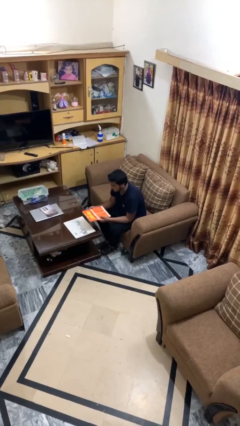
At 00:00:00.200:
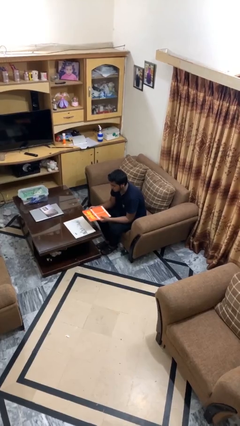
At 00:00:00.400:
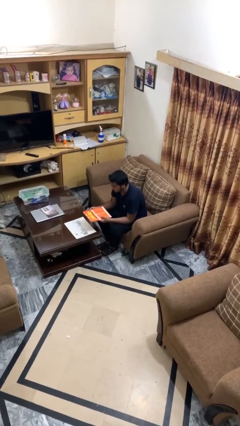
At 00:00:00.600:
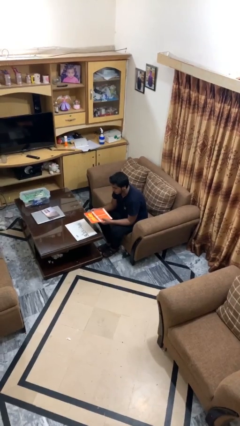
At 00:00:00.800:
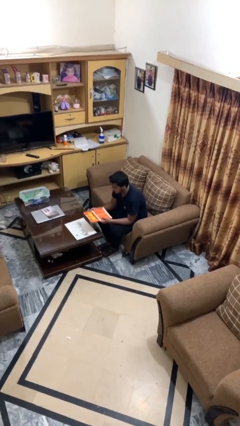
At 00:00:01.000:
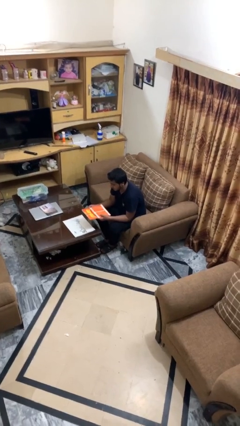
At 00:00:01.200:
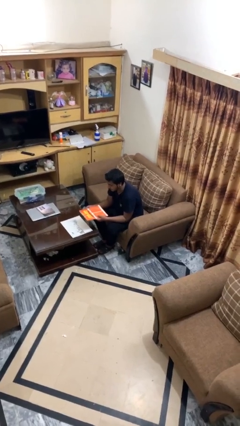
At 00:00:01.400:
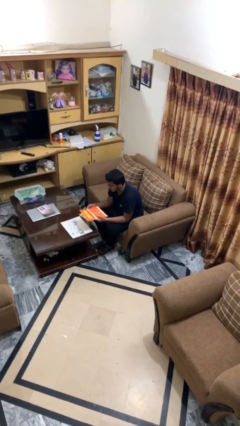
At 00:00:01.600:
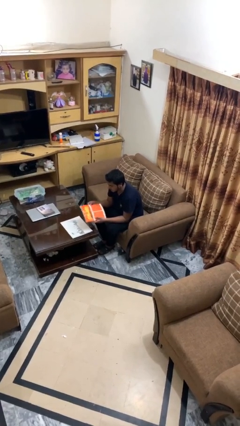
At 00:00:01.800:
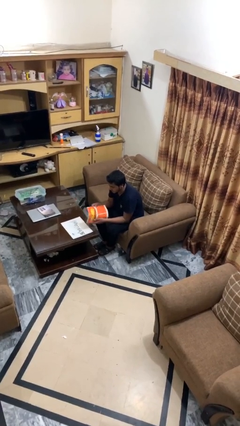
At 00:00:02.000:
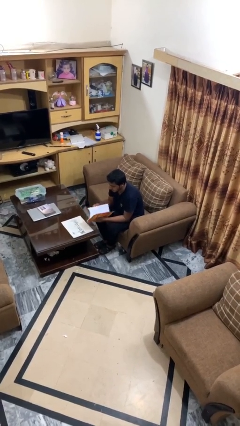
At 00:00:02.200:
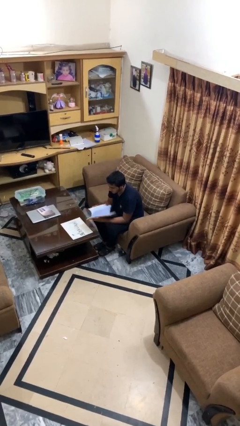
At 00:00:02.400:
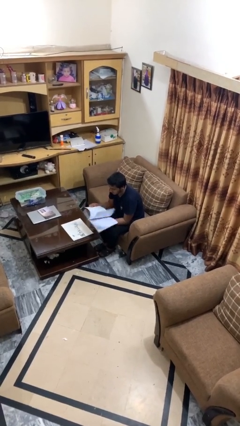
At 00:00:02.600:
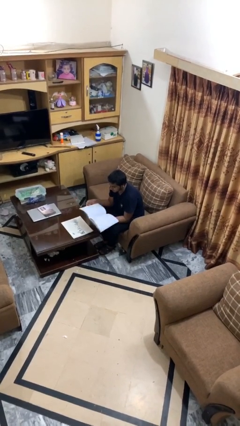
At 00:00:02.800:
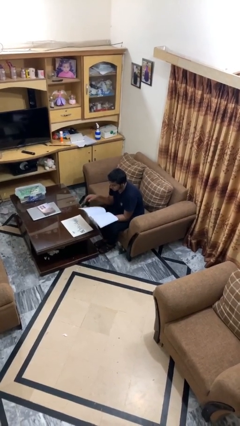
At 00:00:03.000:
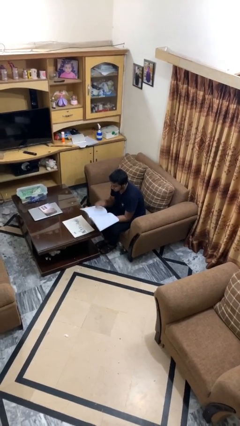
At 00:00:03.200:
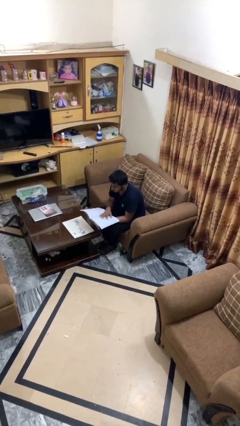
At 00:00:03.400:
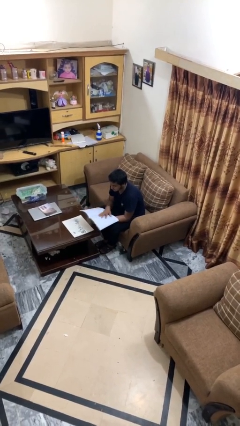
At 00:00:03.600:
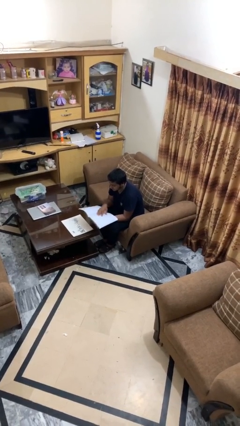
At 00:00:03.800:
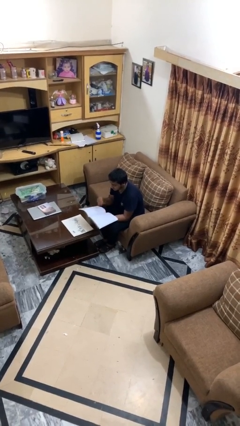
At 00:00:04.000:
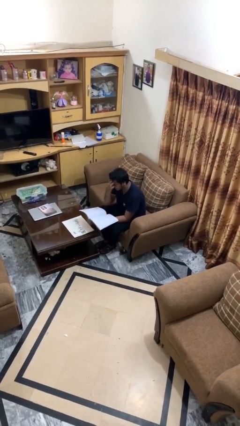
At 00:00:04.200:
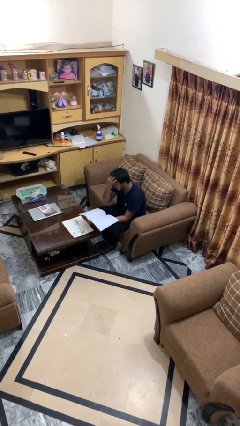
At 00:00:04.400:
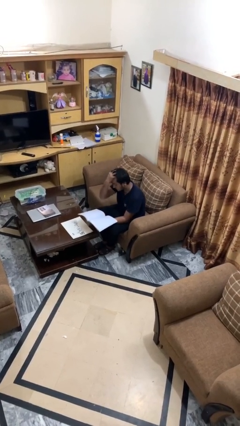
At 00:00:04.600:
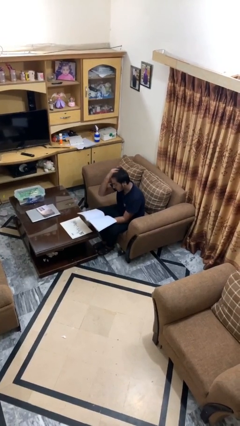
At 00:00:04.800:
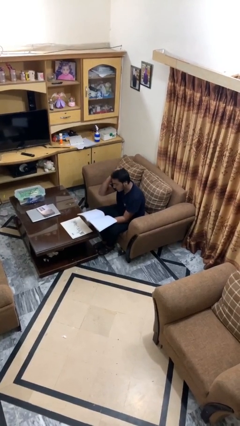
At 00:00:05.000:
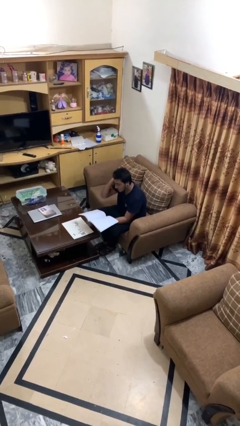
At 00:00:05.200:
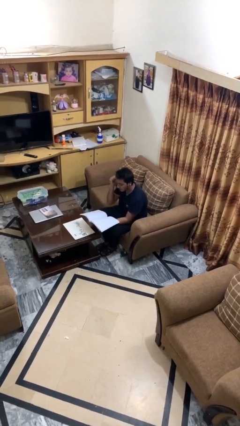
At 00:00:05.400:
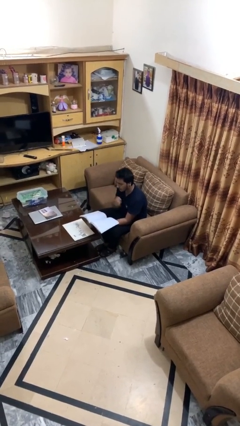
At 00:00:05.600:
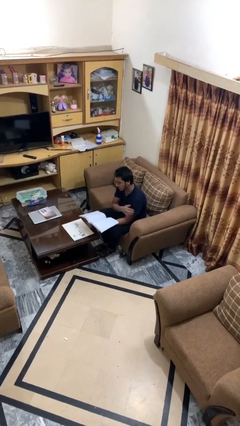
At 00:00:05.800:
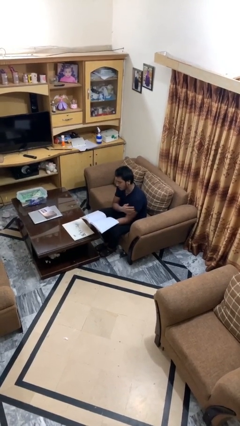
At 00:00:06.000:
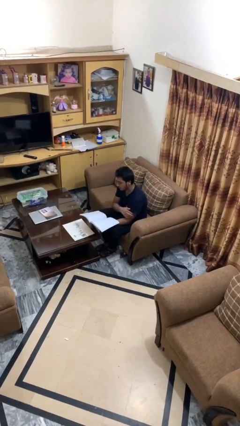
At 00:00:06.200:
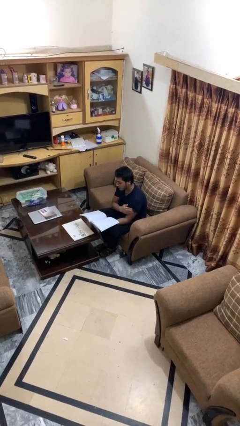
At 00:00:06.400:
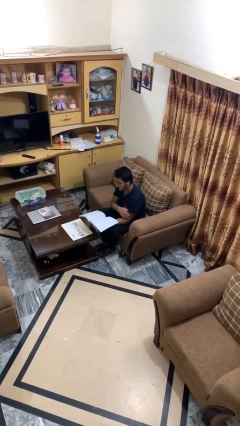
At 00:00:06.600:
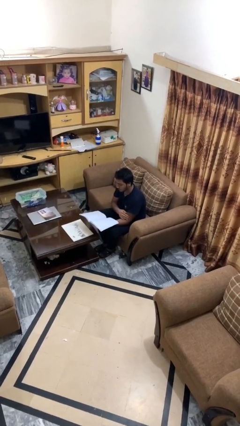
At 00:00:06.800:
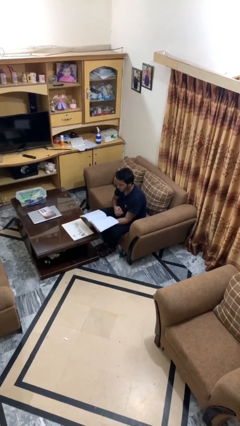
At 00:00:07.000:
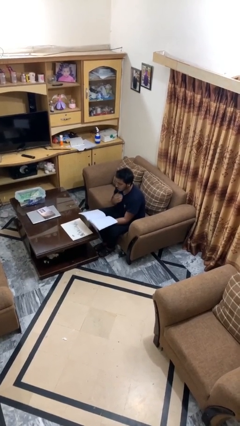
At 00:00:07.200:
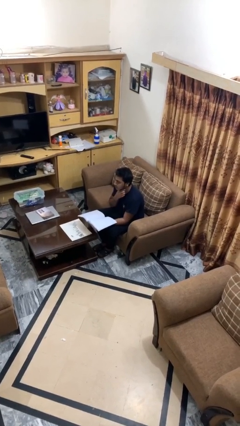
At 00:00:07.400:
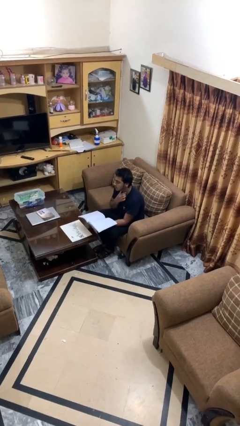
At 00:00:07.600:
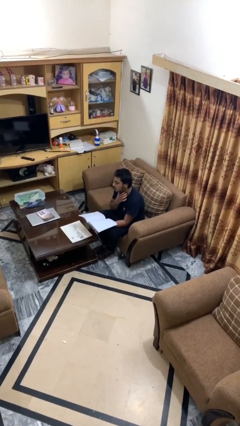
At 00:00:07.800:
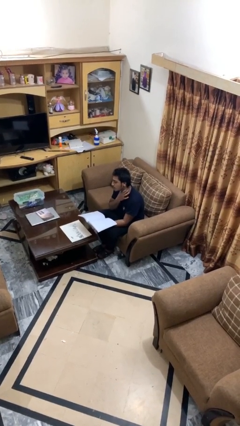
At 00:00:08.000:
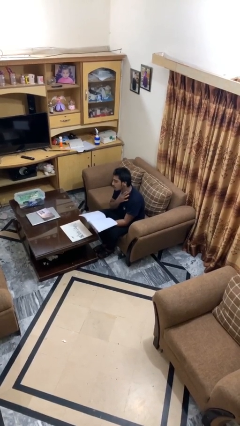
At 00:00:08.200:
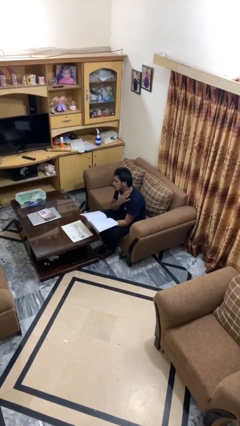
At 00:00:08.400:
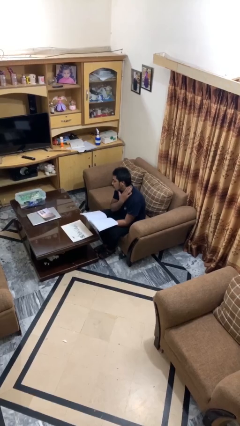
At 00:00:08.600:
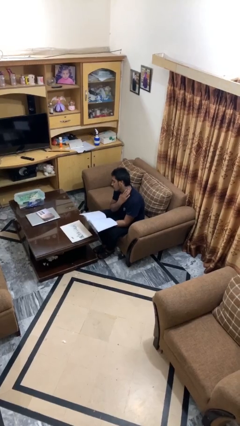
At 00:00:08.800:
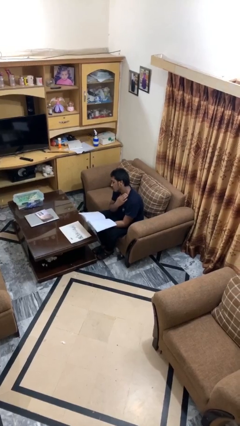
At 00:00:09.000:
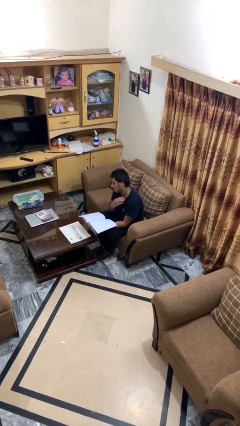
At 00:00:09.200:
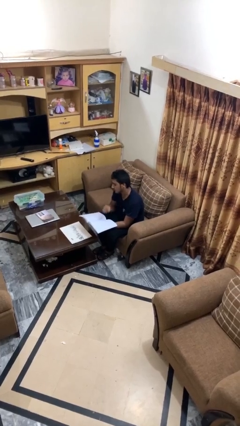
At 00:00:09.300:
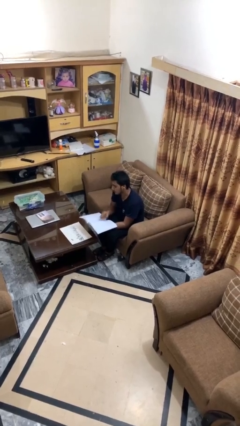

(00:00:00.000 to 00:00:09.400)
person reads document

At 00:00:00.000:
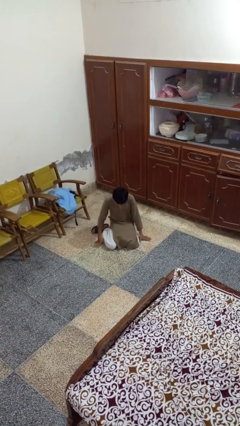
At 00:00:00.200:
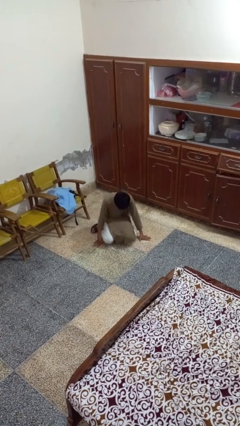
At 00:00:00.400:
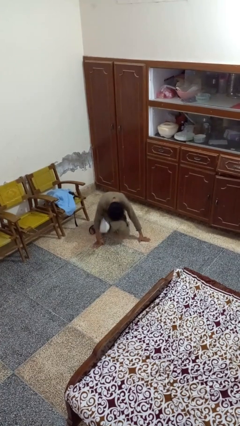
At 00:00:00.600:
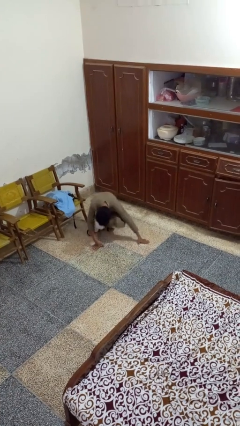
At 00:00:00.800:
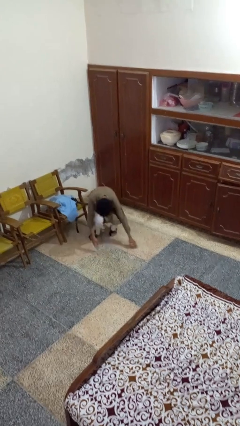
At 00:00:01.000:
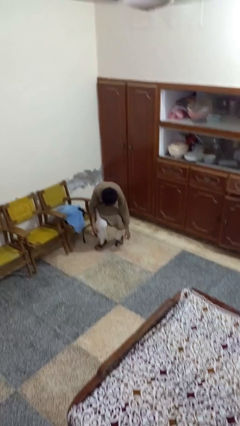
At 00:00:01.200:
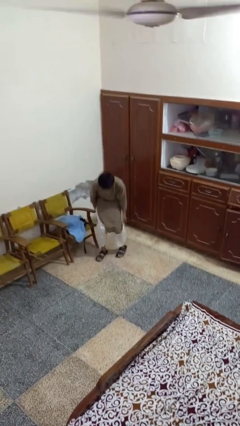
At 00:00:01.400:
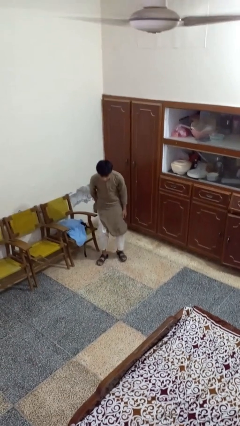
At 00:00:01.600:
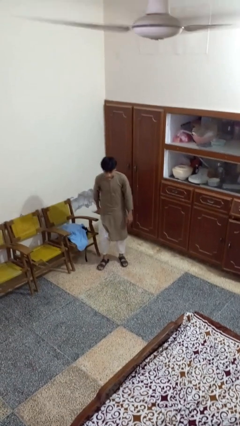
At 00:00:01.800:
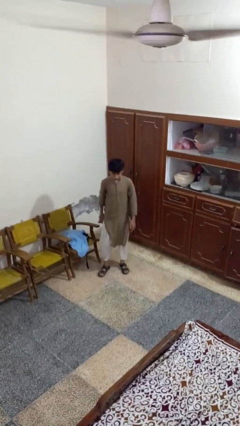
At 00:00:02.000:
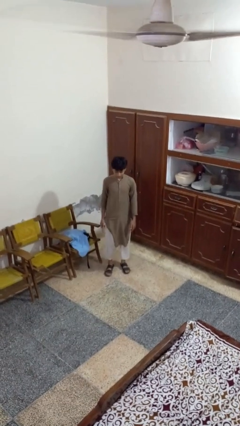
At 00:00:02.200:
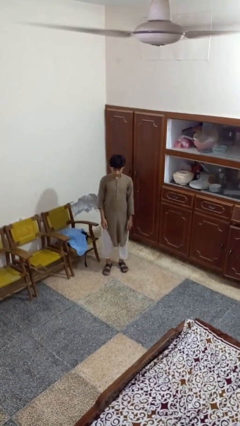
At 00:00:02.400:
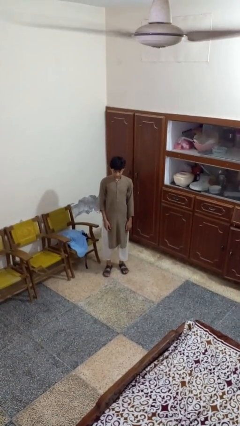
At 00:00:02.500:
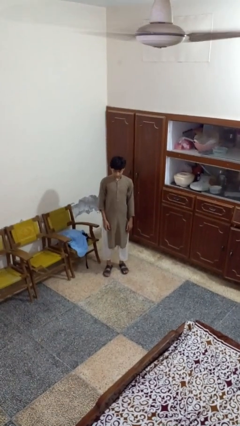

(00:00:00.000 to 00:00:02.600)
person stands up from floor

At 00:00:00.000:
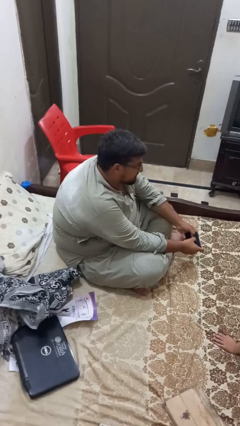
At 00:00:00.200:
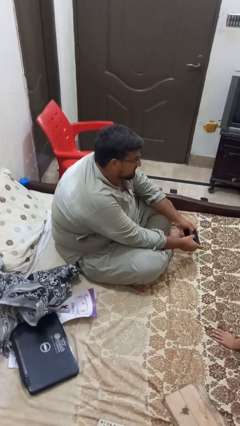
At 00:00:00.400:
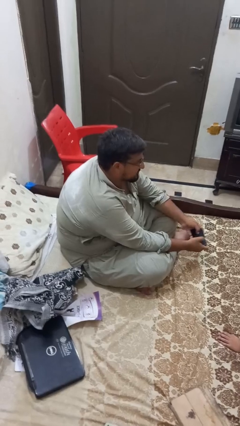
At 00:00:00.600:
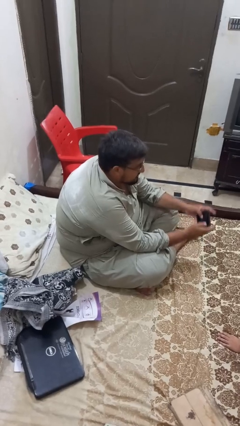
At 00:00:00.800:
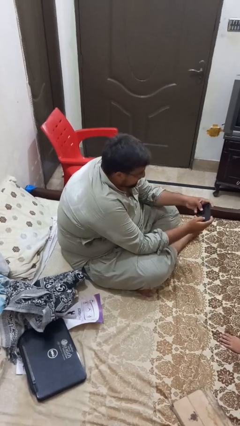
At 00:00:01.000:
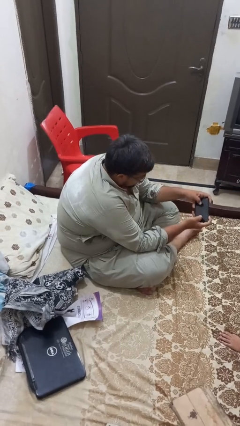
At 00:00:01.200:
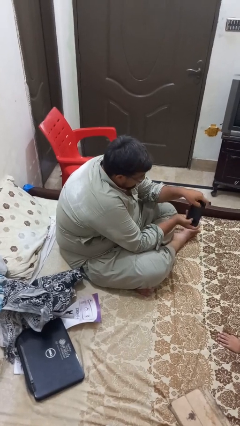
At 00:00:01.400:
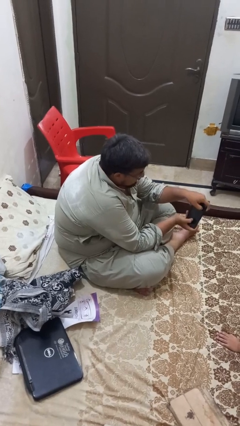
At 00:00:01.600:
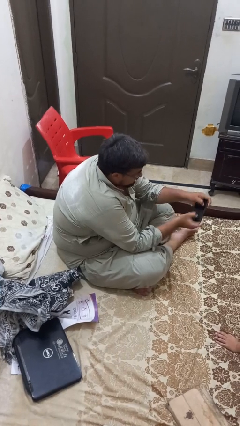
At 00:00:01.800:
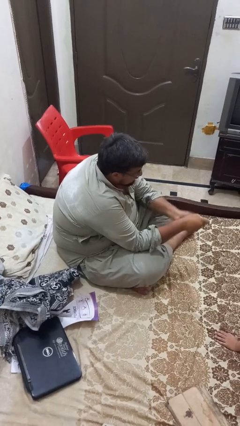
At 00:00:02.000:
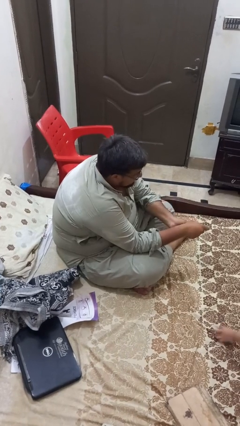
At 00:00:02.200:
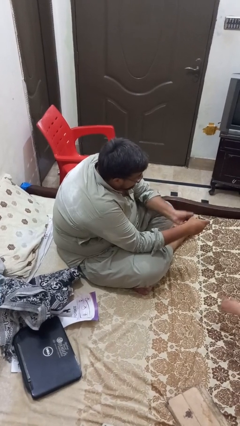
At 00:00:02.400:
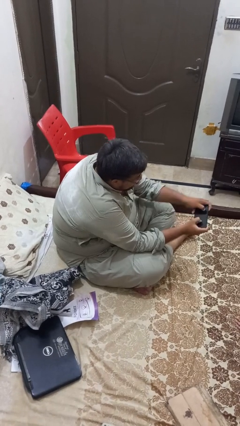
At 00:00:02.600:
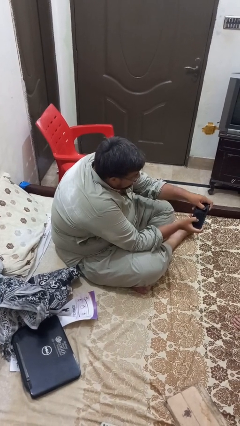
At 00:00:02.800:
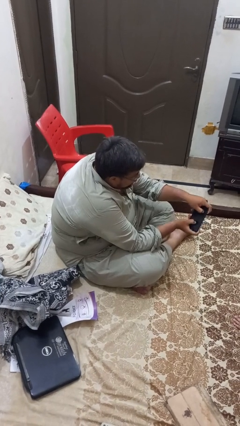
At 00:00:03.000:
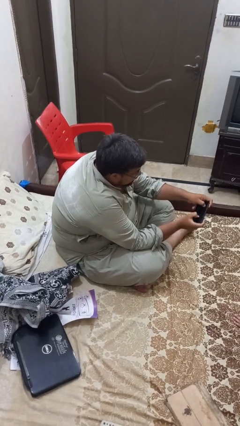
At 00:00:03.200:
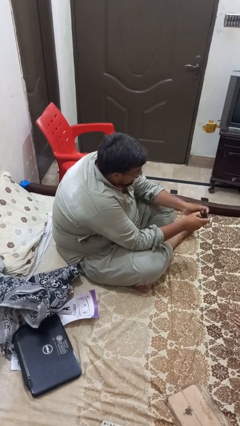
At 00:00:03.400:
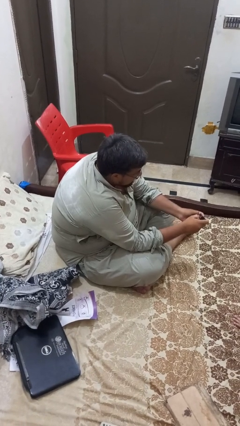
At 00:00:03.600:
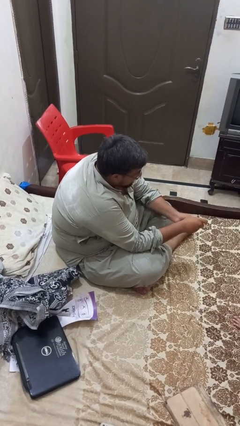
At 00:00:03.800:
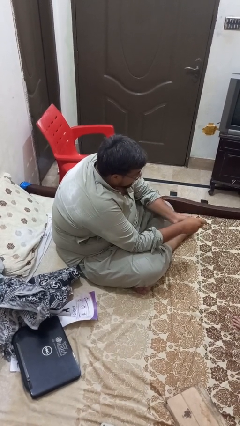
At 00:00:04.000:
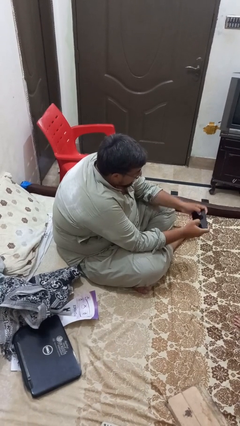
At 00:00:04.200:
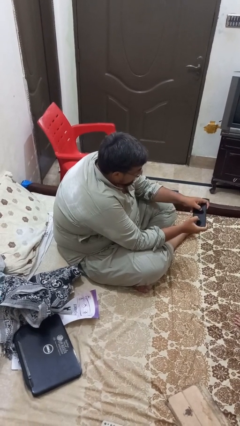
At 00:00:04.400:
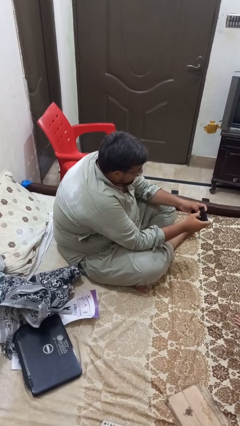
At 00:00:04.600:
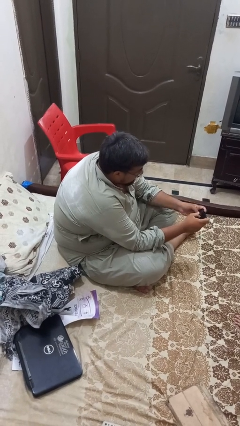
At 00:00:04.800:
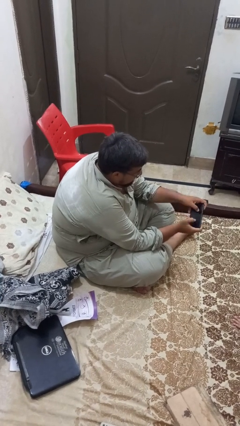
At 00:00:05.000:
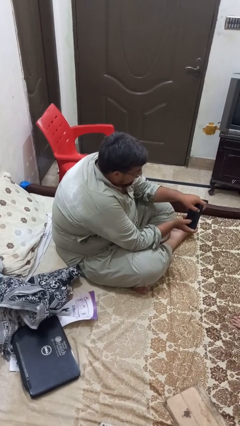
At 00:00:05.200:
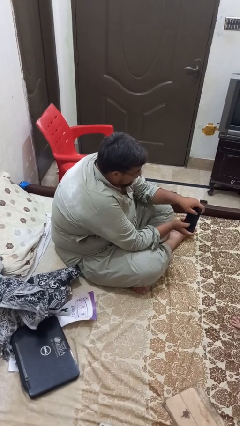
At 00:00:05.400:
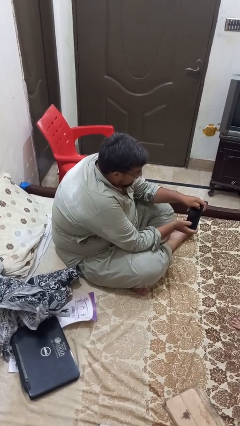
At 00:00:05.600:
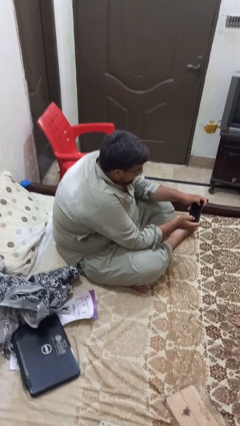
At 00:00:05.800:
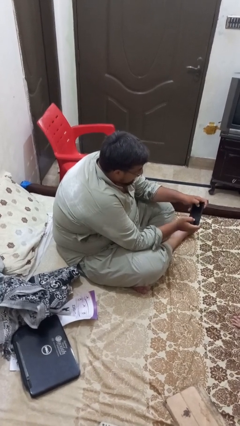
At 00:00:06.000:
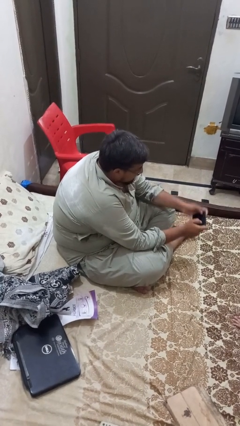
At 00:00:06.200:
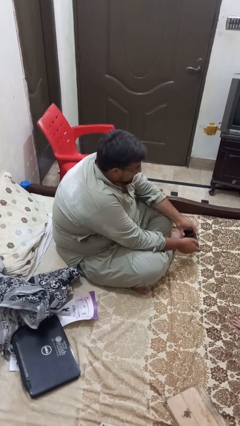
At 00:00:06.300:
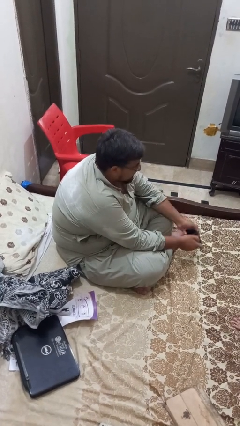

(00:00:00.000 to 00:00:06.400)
person interacts with handheld game
